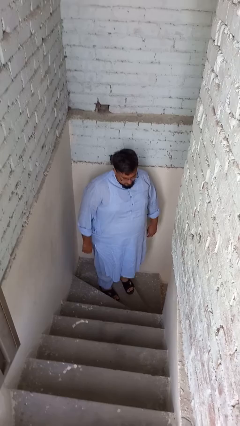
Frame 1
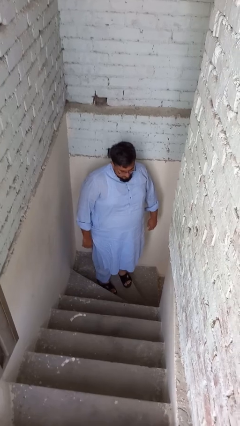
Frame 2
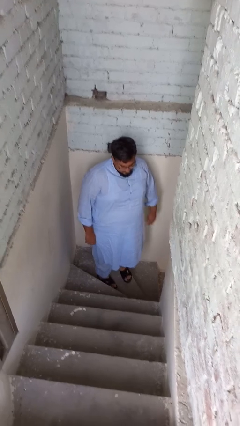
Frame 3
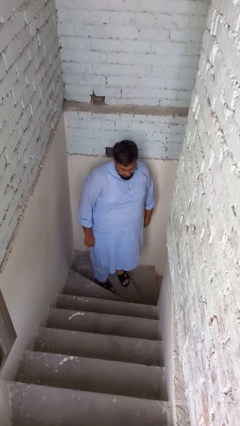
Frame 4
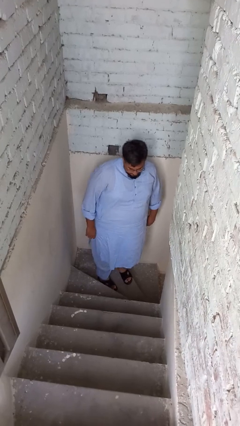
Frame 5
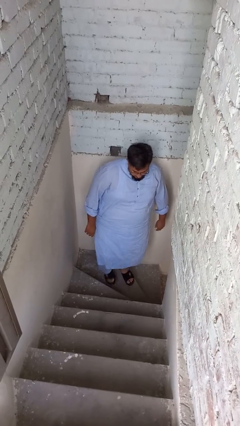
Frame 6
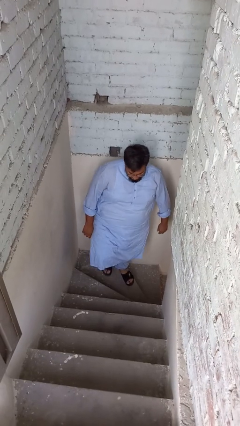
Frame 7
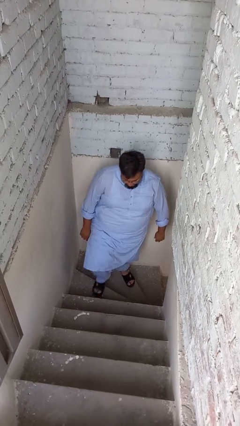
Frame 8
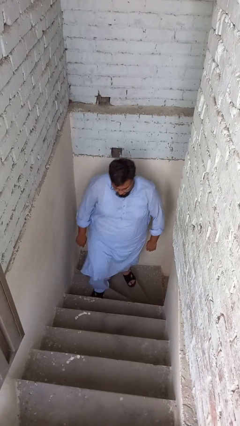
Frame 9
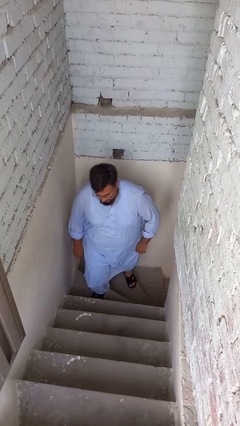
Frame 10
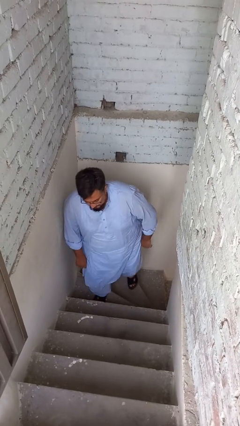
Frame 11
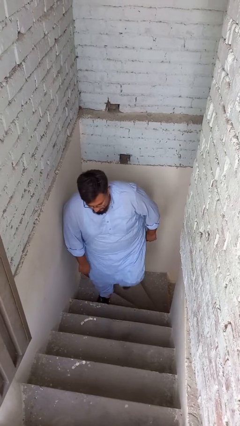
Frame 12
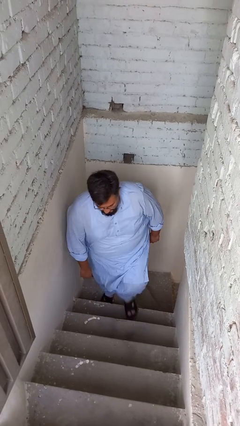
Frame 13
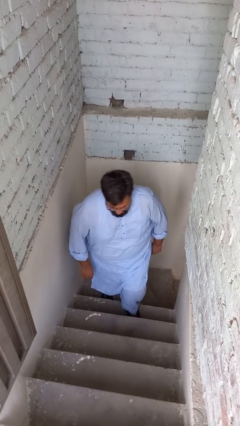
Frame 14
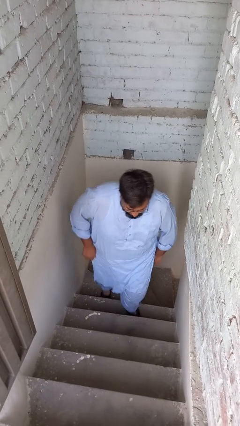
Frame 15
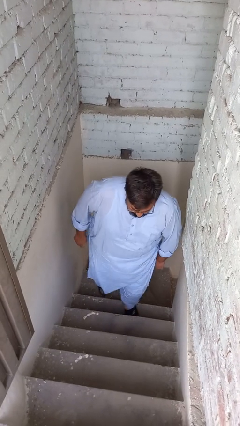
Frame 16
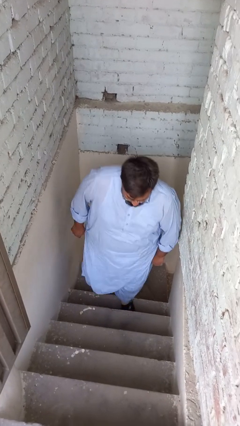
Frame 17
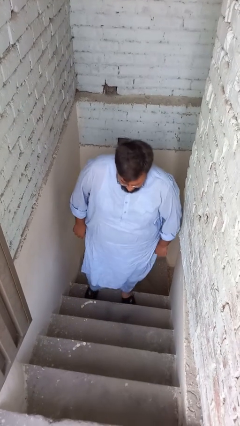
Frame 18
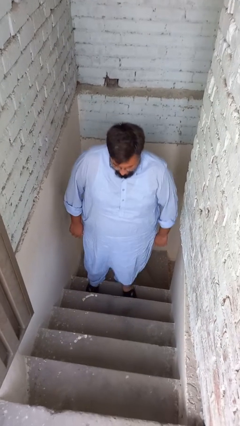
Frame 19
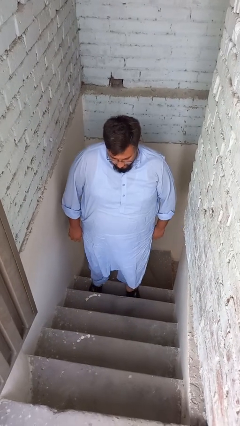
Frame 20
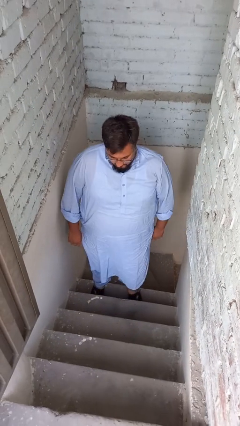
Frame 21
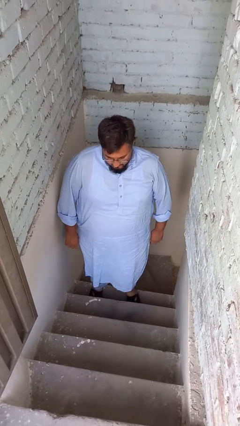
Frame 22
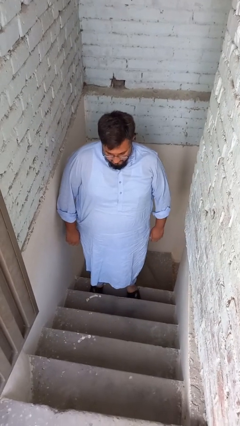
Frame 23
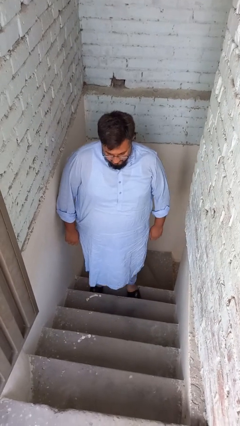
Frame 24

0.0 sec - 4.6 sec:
person climbs up stairs

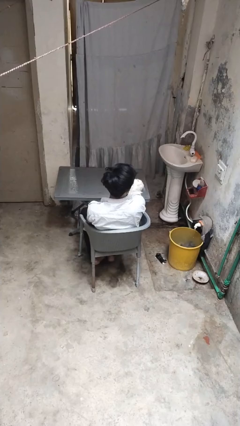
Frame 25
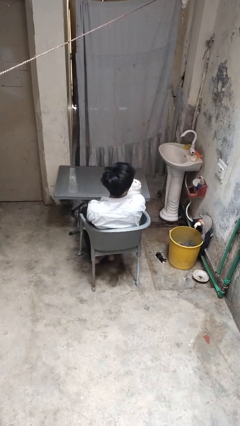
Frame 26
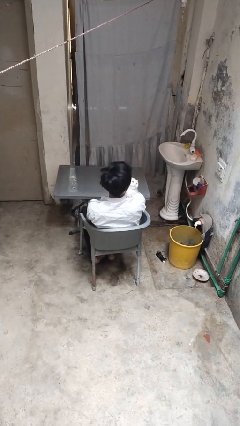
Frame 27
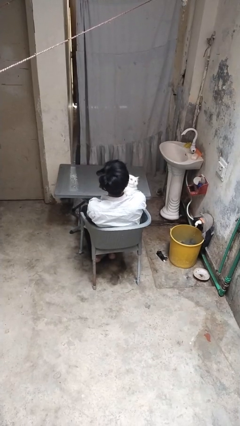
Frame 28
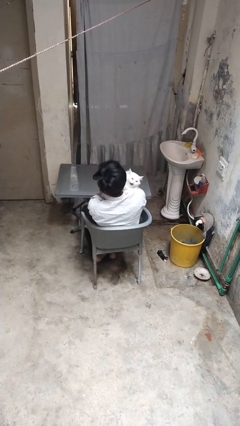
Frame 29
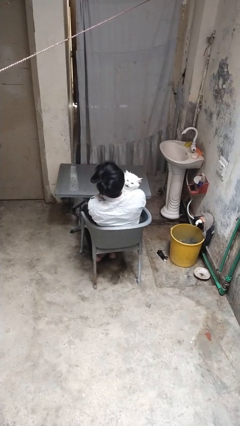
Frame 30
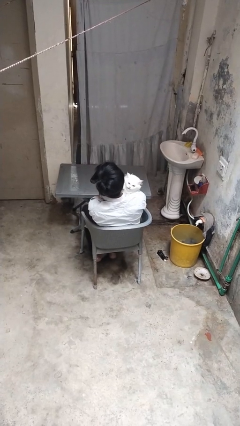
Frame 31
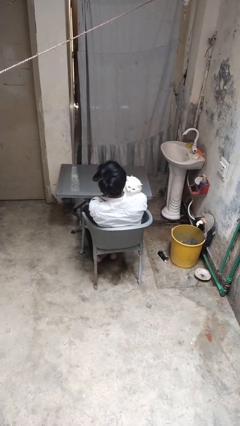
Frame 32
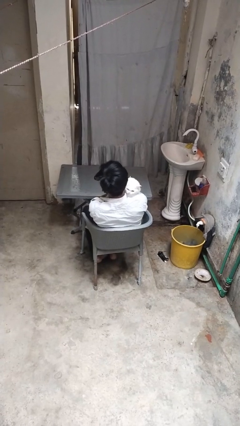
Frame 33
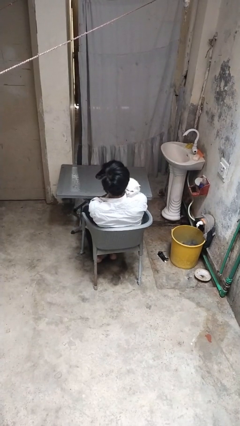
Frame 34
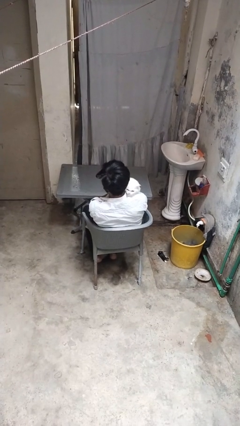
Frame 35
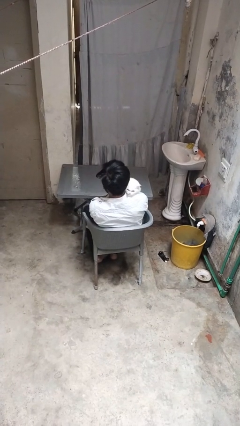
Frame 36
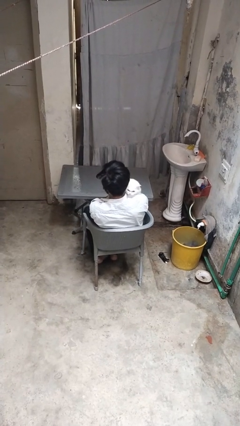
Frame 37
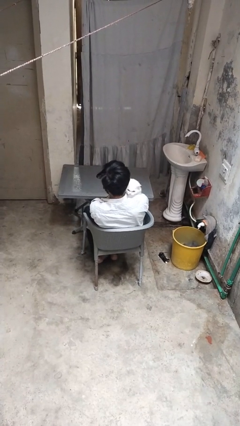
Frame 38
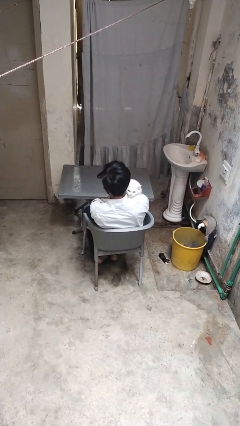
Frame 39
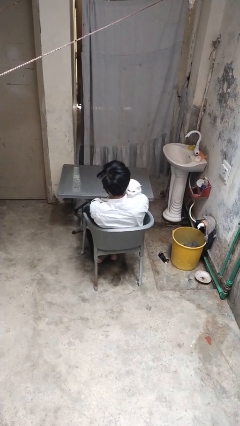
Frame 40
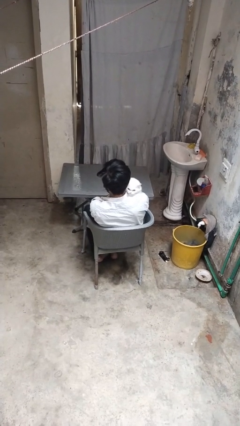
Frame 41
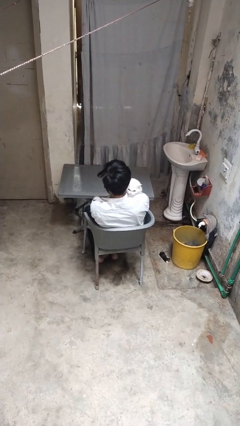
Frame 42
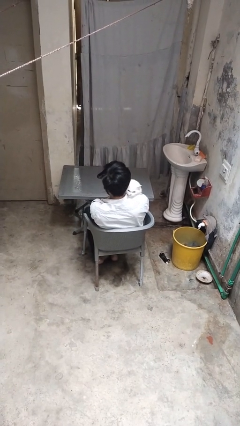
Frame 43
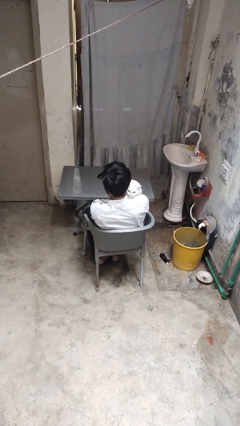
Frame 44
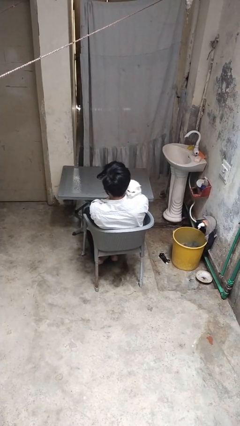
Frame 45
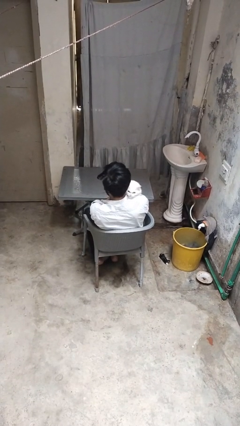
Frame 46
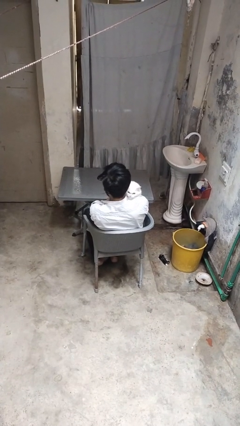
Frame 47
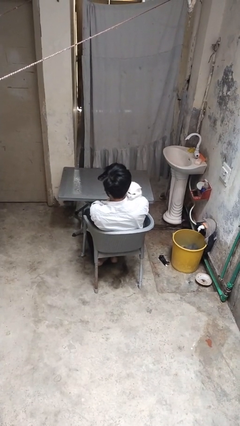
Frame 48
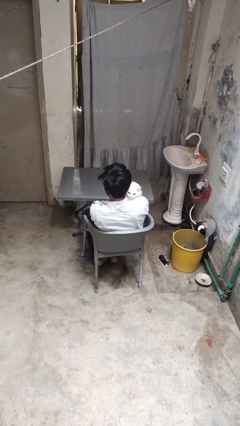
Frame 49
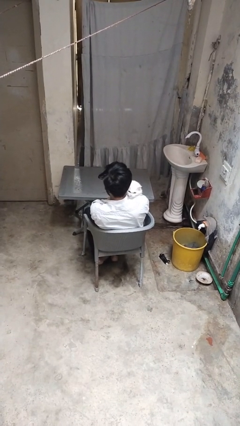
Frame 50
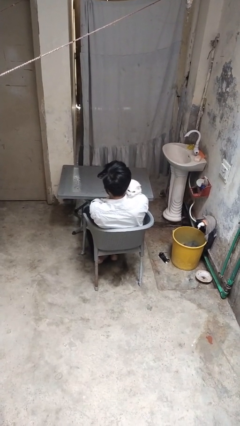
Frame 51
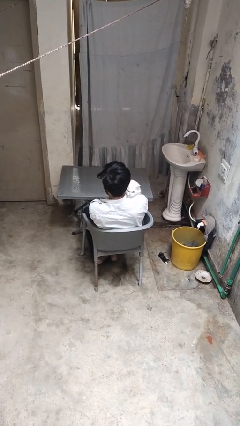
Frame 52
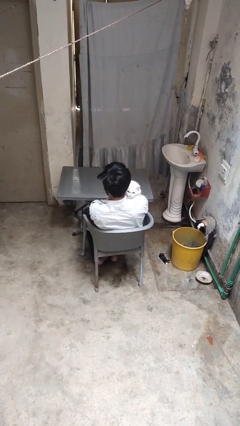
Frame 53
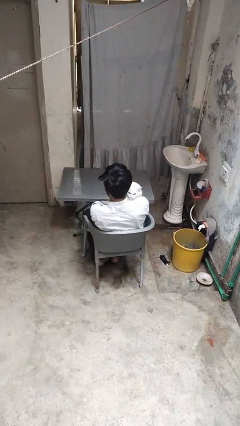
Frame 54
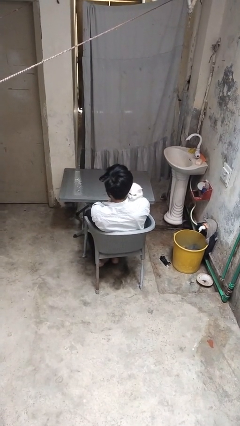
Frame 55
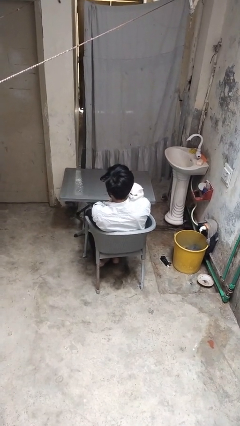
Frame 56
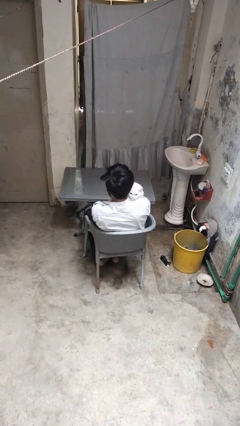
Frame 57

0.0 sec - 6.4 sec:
person hugs cat

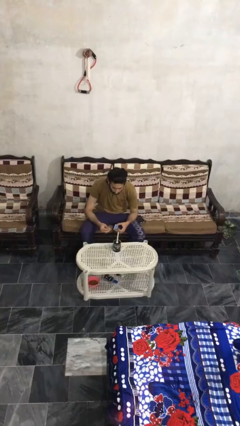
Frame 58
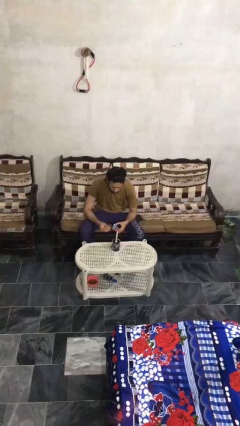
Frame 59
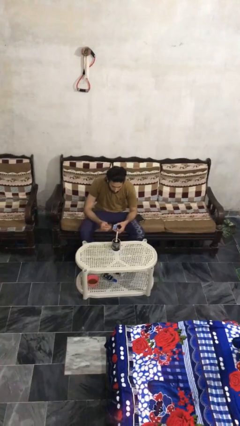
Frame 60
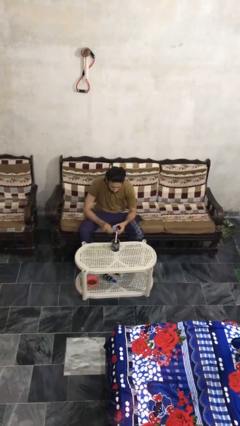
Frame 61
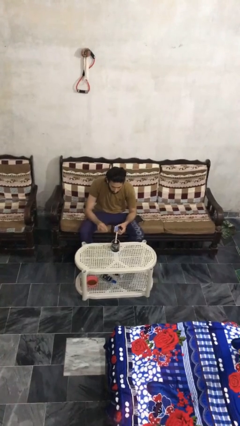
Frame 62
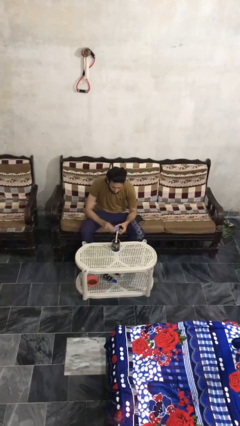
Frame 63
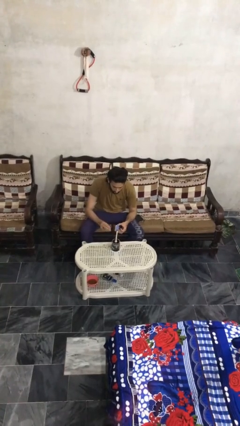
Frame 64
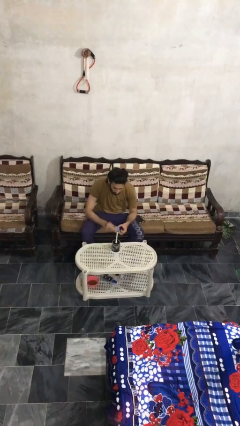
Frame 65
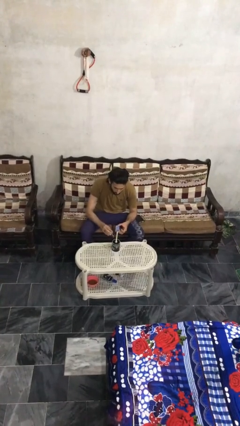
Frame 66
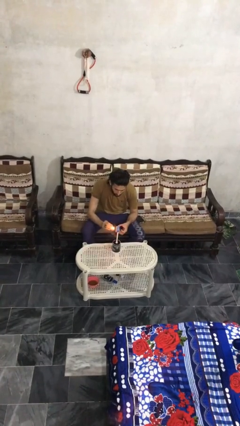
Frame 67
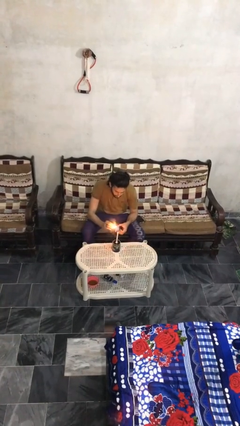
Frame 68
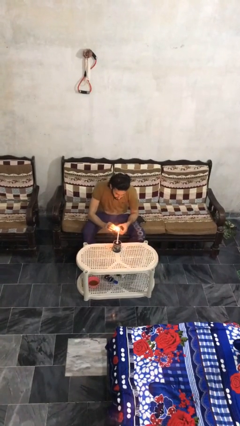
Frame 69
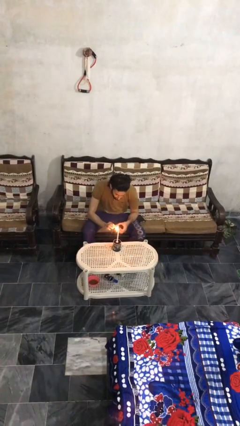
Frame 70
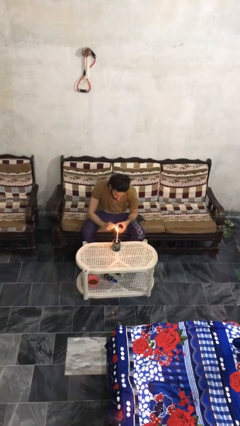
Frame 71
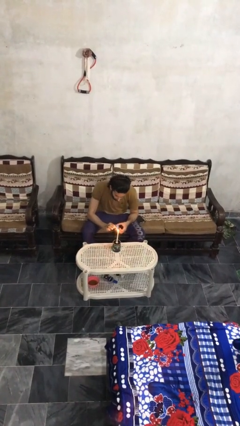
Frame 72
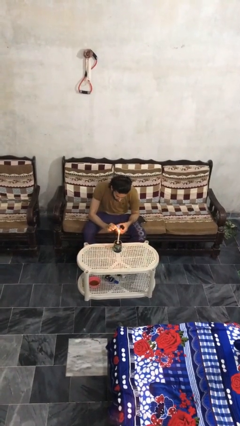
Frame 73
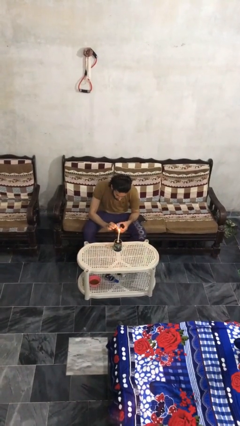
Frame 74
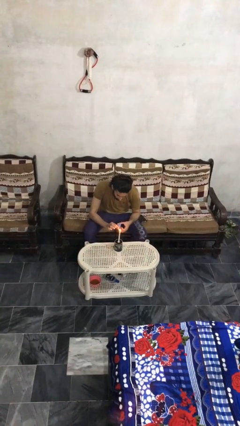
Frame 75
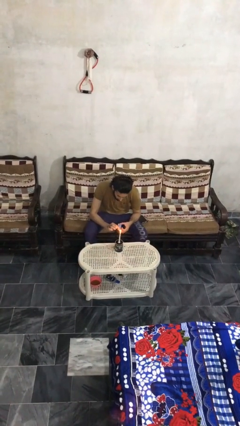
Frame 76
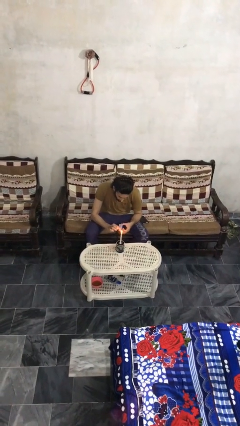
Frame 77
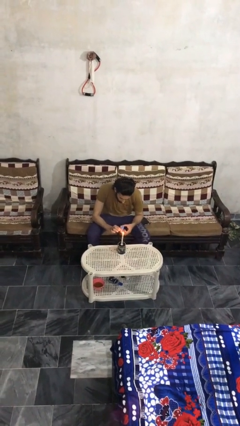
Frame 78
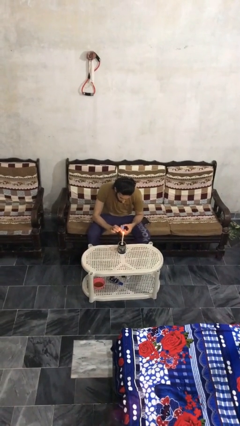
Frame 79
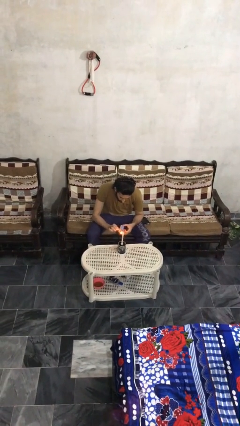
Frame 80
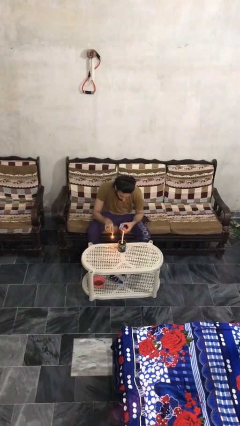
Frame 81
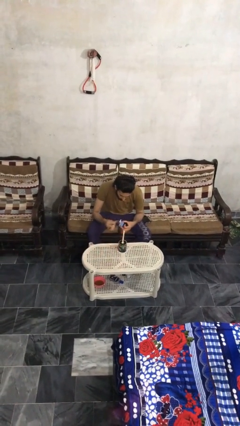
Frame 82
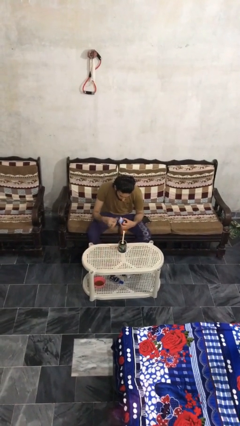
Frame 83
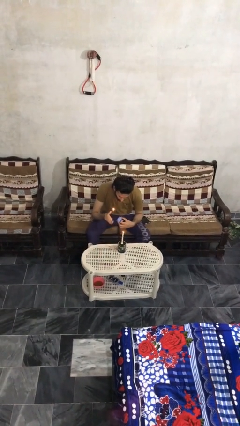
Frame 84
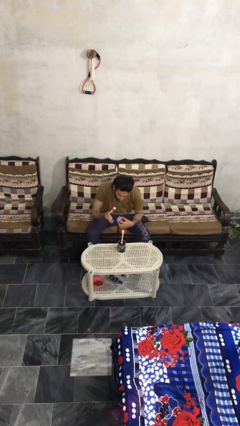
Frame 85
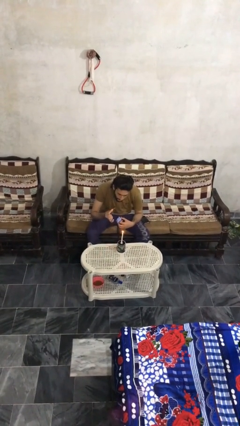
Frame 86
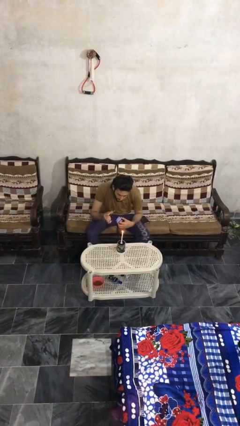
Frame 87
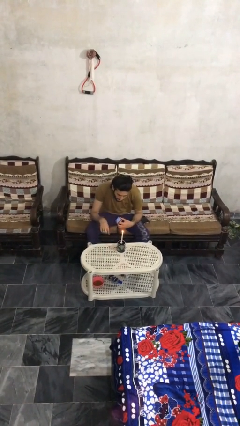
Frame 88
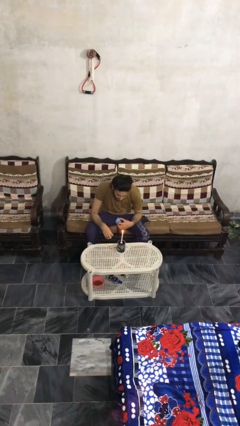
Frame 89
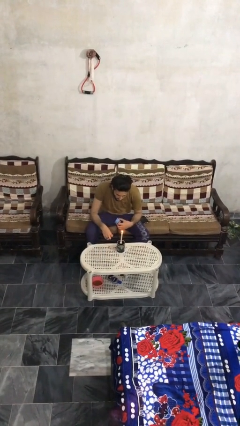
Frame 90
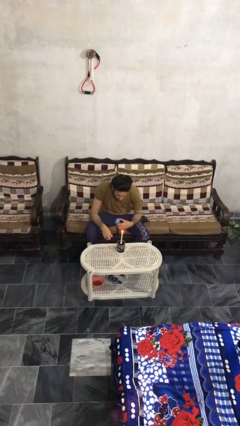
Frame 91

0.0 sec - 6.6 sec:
person lights candle
